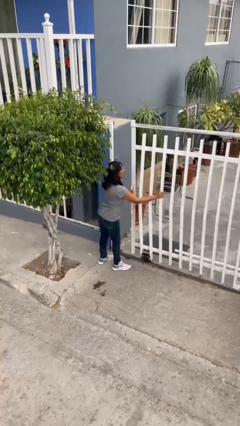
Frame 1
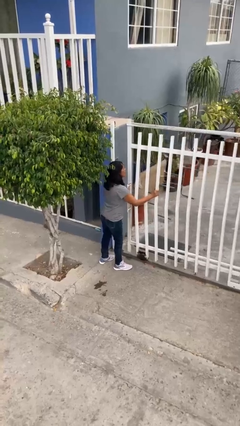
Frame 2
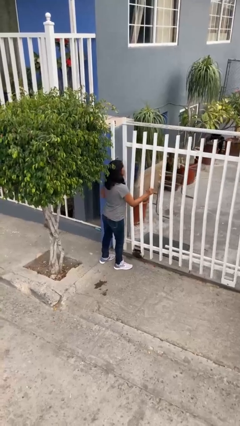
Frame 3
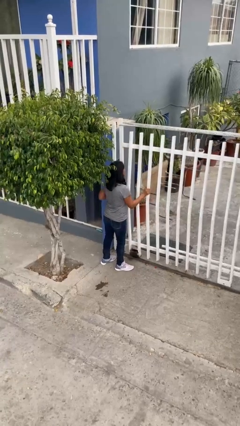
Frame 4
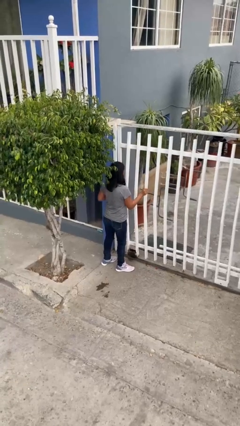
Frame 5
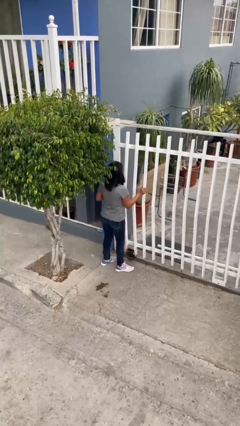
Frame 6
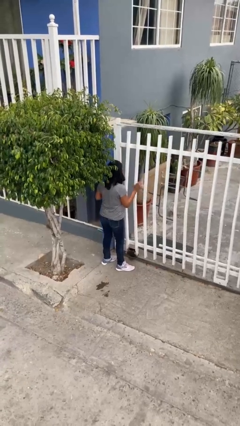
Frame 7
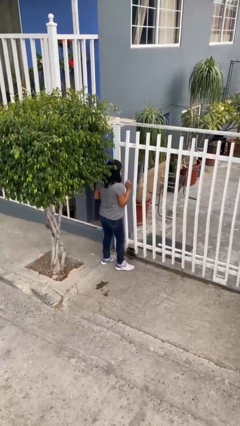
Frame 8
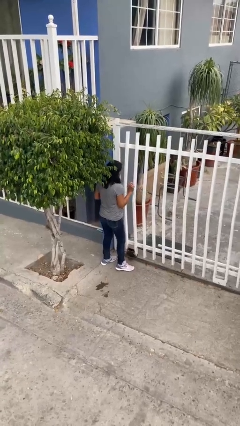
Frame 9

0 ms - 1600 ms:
person closes facility door

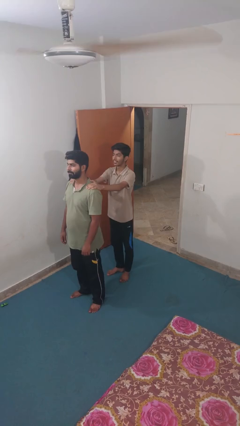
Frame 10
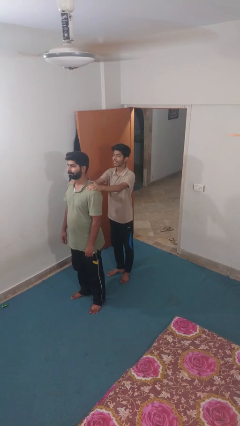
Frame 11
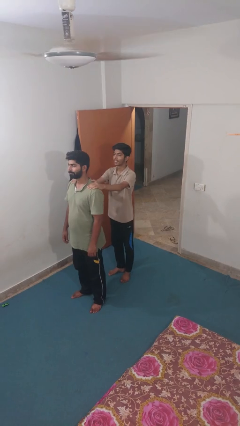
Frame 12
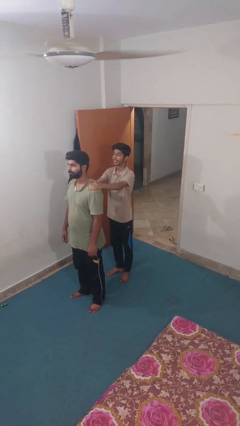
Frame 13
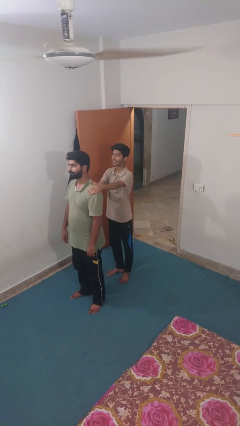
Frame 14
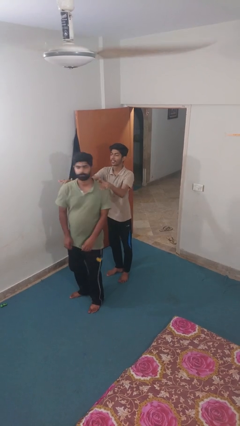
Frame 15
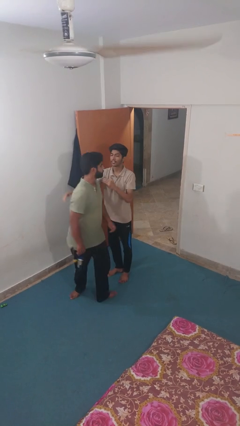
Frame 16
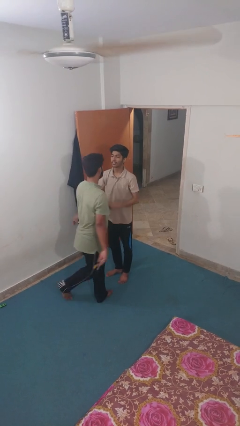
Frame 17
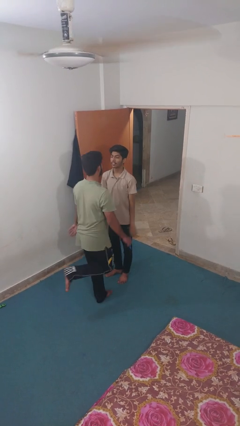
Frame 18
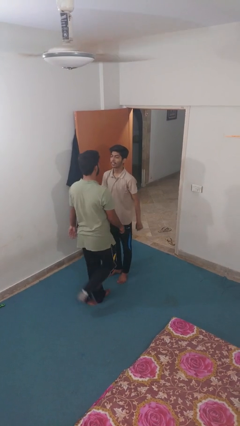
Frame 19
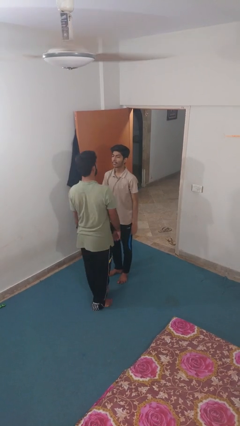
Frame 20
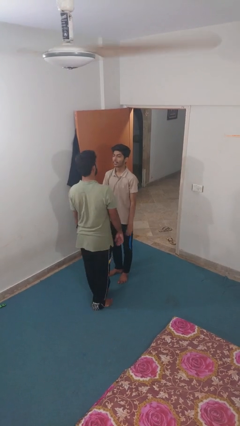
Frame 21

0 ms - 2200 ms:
person spins person around

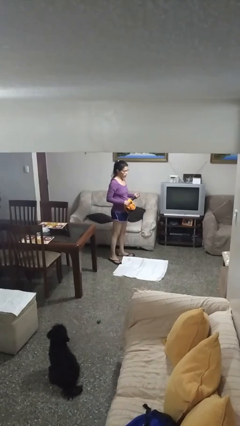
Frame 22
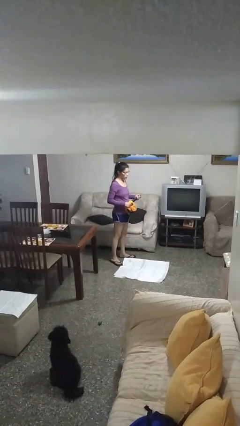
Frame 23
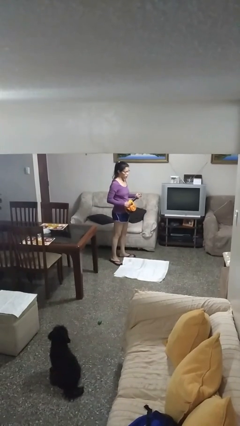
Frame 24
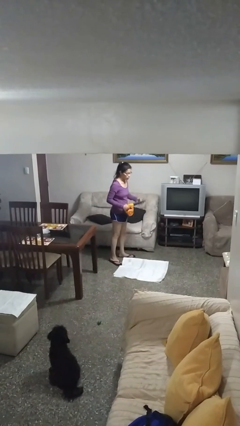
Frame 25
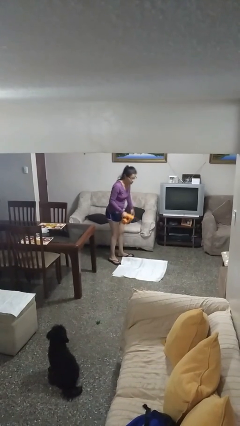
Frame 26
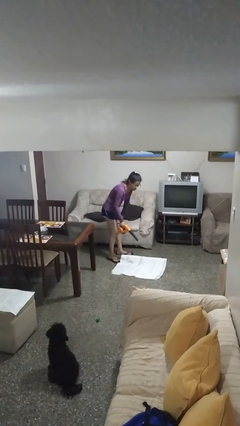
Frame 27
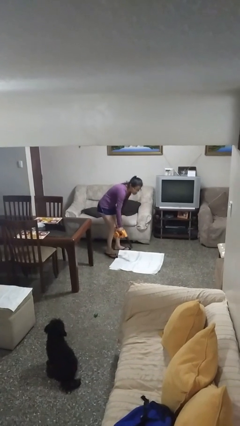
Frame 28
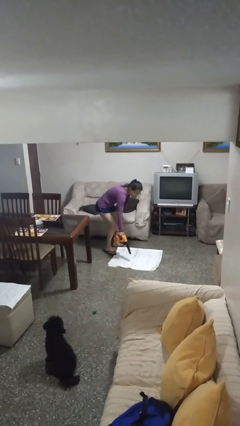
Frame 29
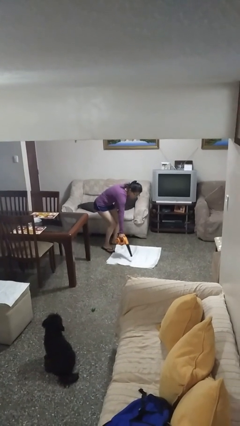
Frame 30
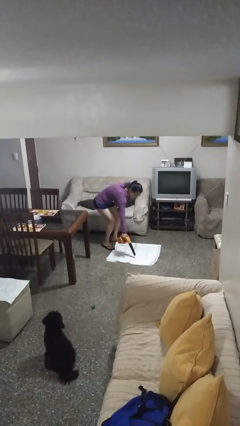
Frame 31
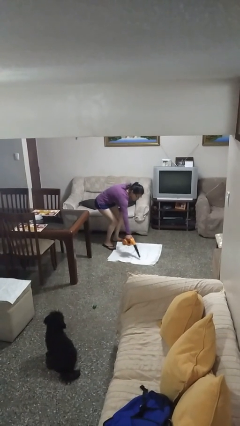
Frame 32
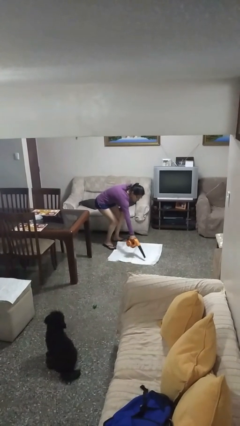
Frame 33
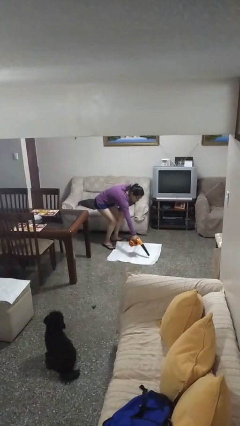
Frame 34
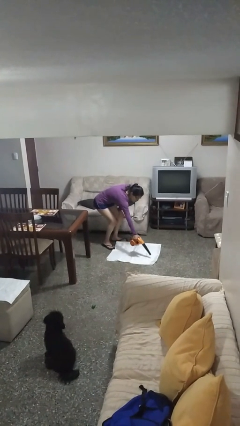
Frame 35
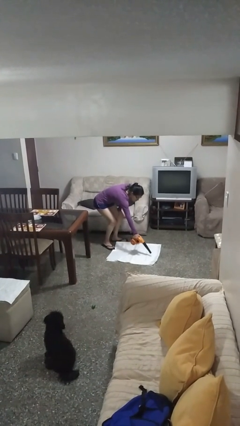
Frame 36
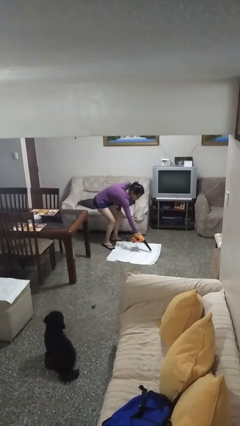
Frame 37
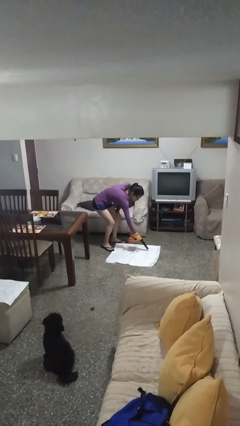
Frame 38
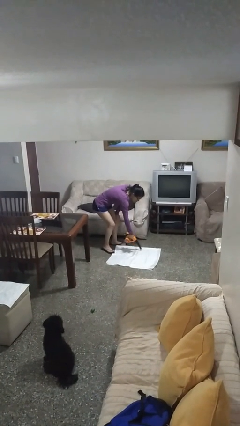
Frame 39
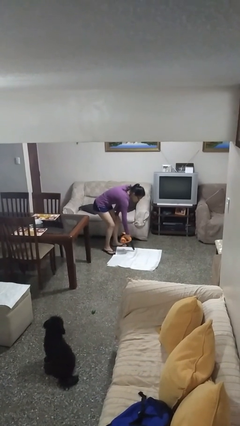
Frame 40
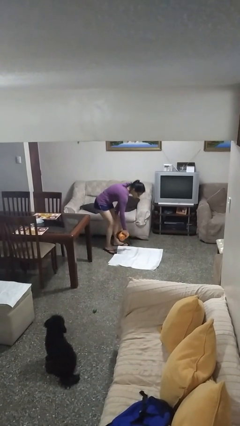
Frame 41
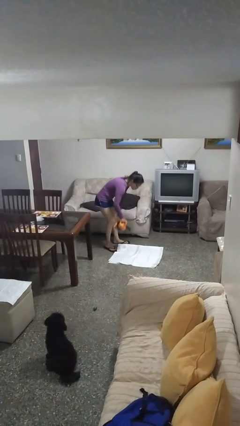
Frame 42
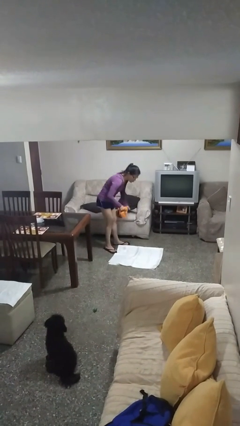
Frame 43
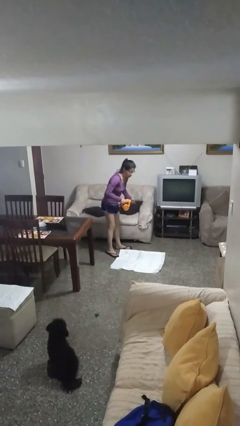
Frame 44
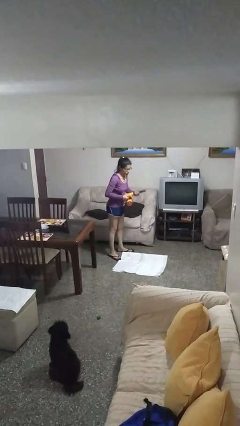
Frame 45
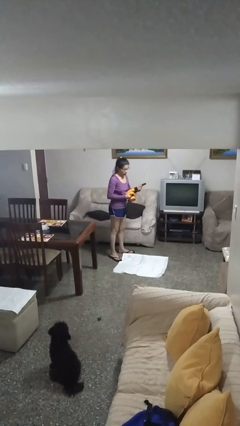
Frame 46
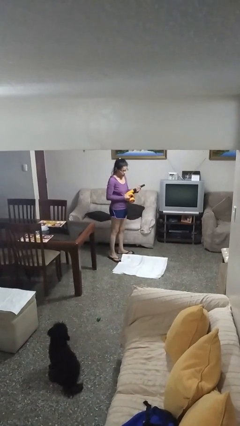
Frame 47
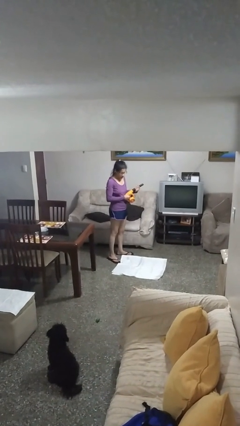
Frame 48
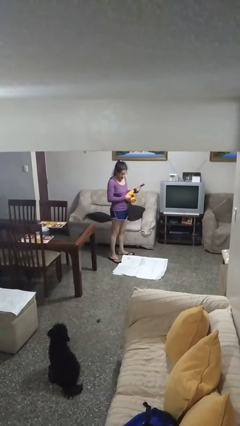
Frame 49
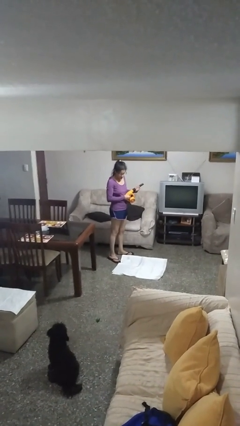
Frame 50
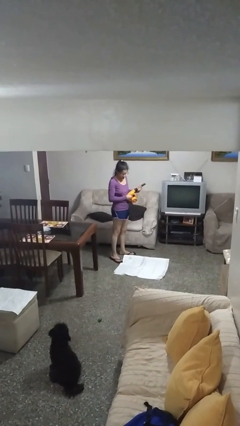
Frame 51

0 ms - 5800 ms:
person vacuums carpet

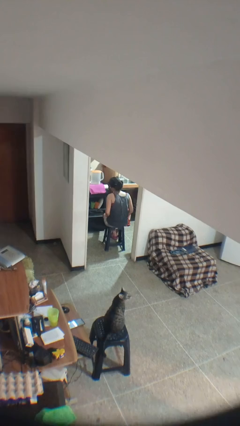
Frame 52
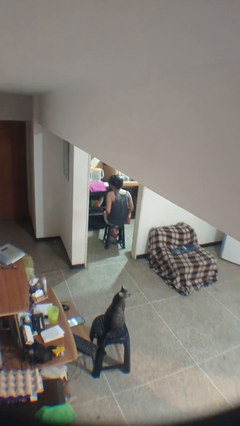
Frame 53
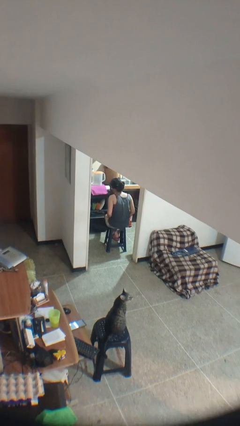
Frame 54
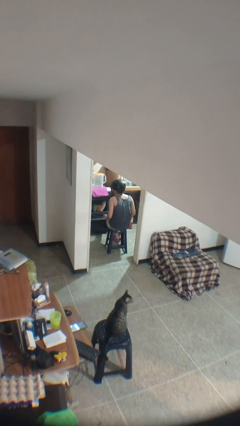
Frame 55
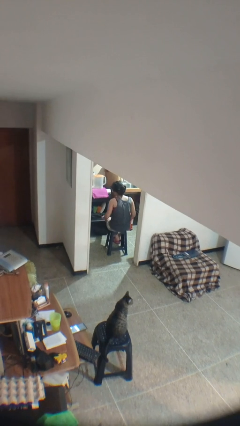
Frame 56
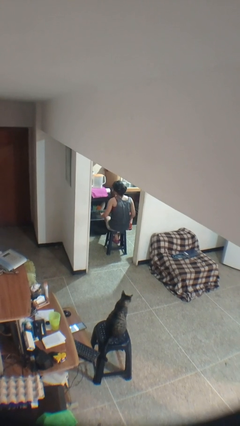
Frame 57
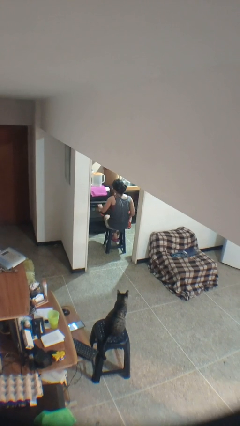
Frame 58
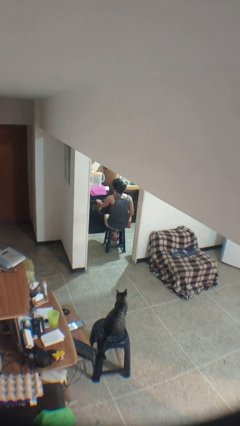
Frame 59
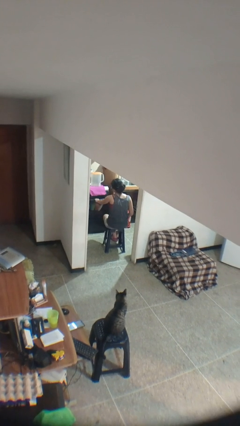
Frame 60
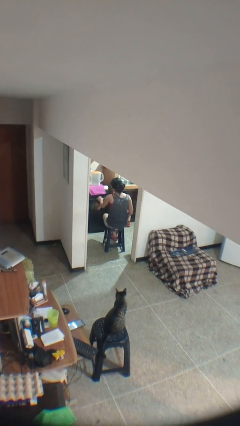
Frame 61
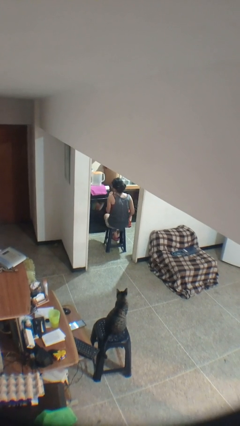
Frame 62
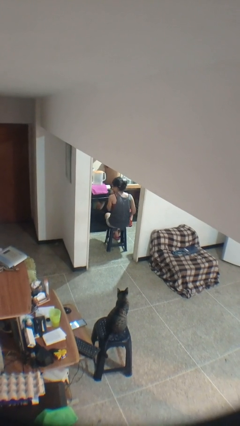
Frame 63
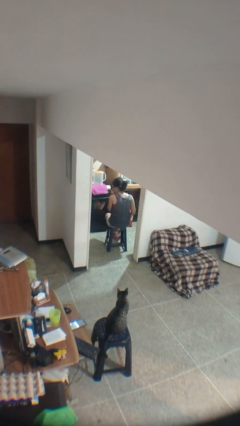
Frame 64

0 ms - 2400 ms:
person closes dishwasher

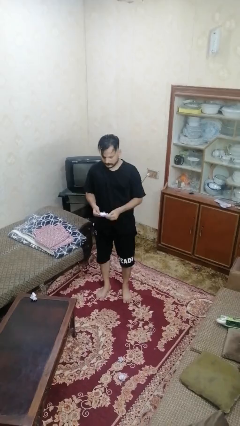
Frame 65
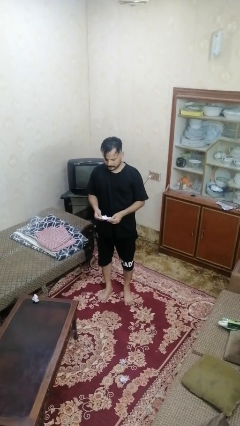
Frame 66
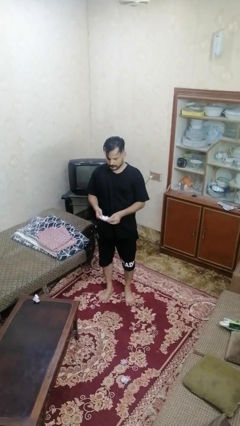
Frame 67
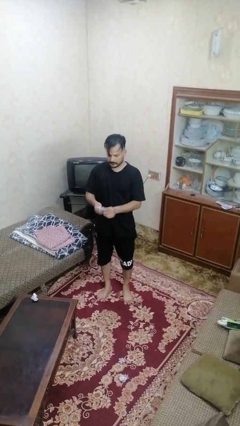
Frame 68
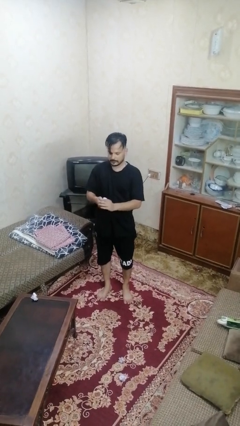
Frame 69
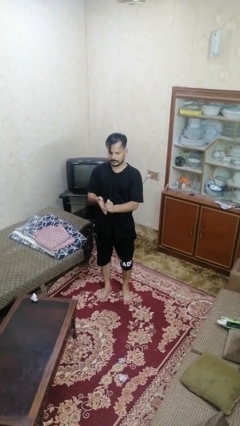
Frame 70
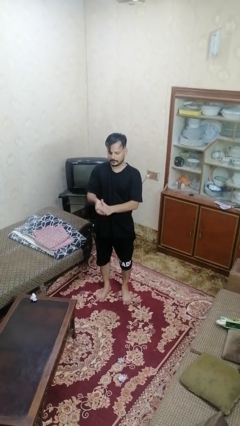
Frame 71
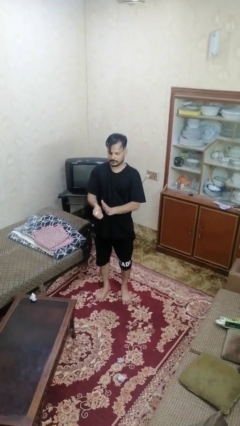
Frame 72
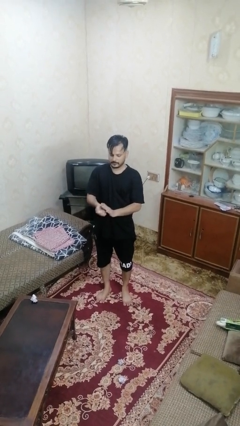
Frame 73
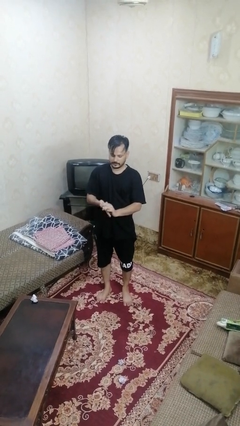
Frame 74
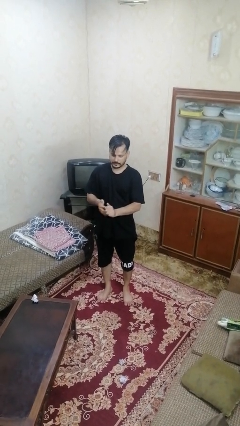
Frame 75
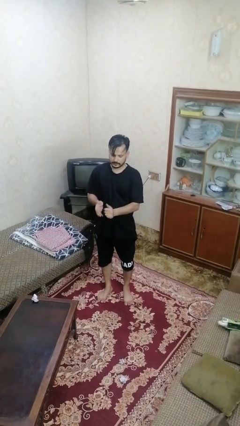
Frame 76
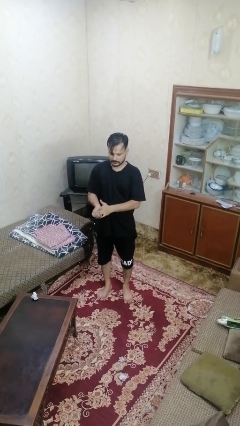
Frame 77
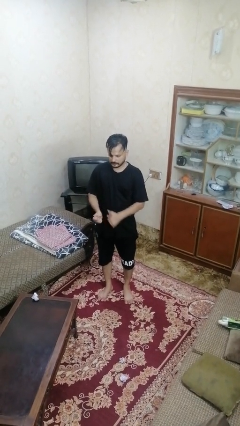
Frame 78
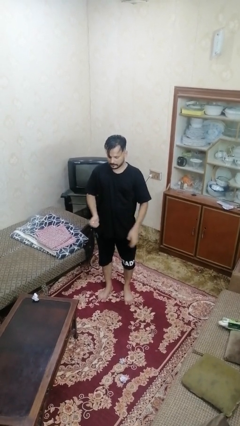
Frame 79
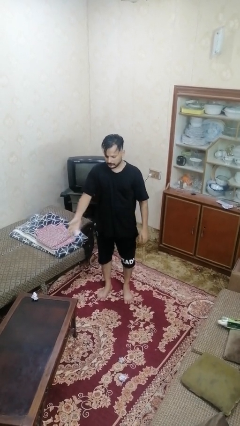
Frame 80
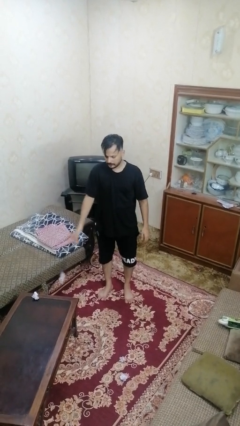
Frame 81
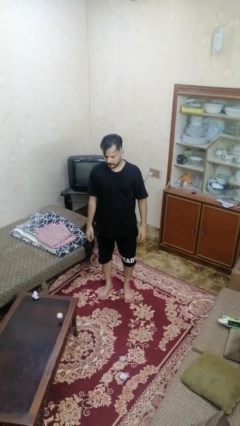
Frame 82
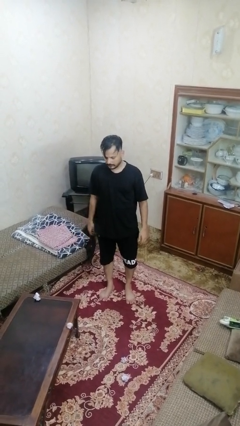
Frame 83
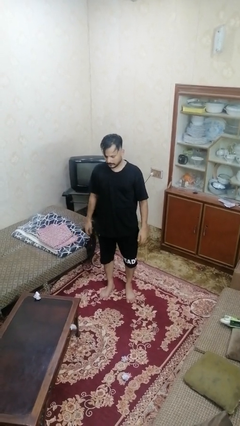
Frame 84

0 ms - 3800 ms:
person crumples paper

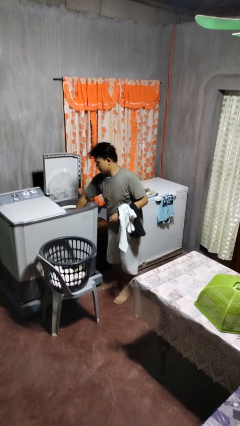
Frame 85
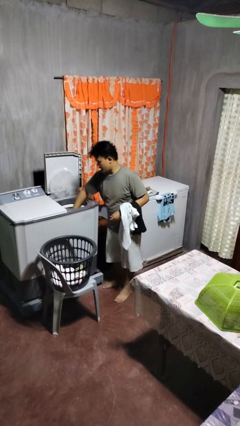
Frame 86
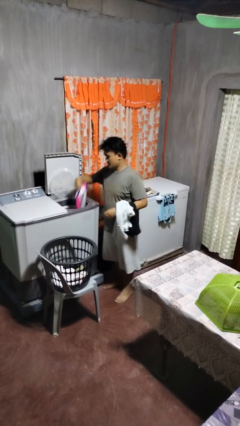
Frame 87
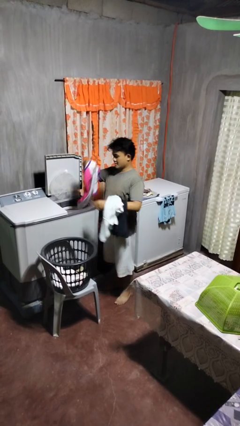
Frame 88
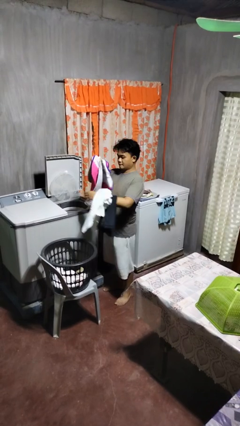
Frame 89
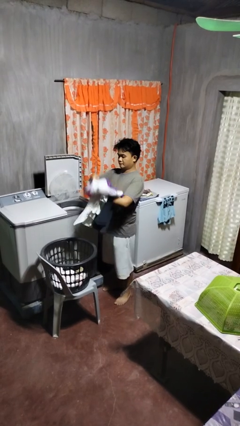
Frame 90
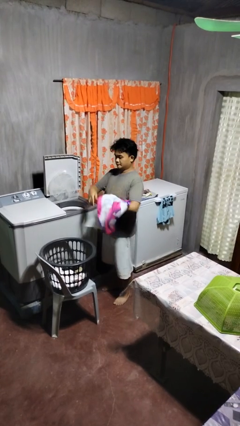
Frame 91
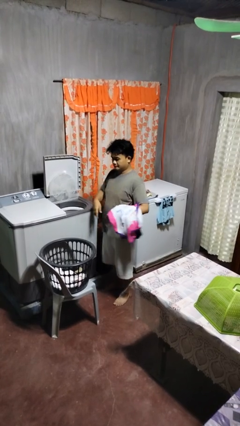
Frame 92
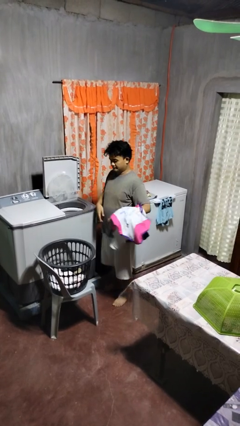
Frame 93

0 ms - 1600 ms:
person unloads dryer

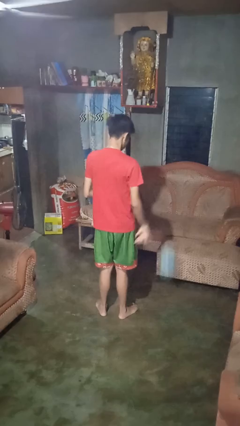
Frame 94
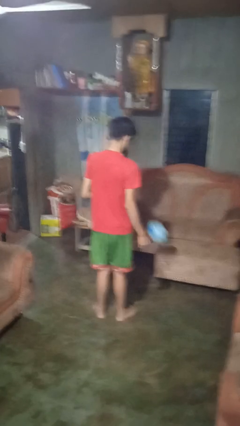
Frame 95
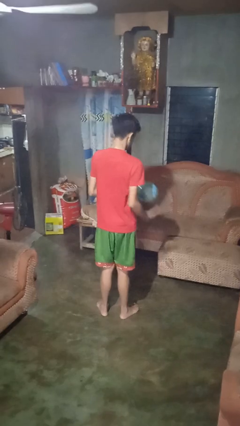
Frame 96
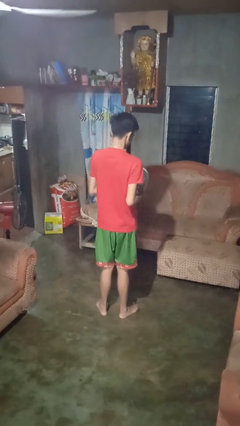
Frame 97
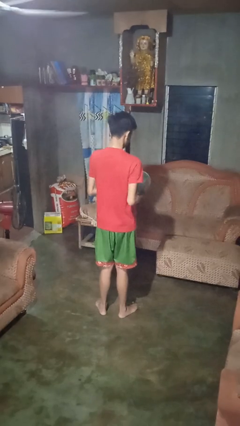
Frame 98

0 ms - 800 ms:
person bounces ball on floor
